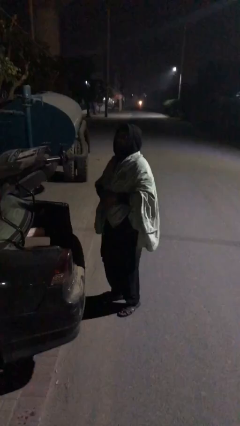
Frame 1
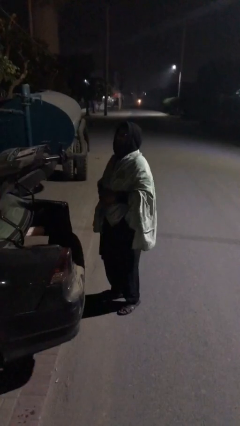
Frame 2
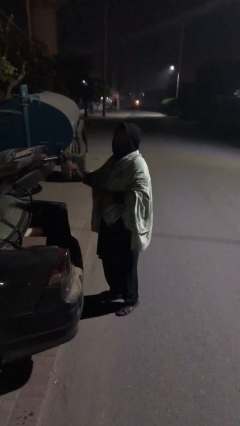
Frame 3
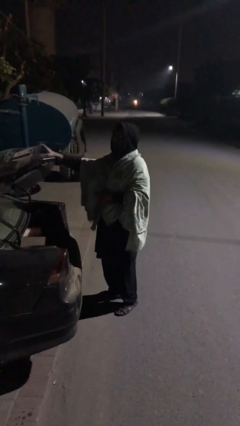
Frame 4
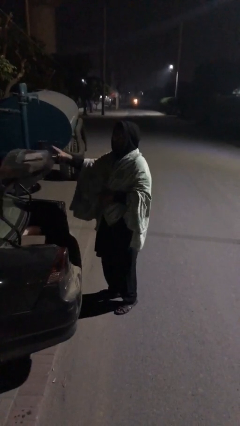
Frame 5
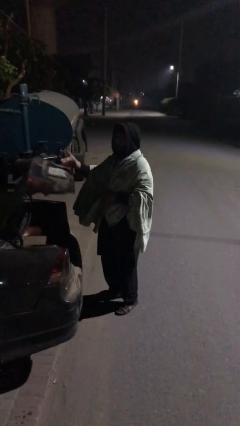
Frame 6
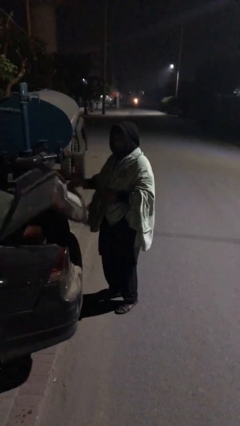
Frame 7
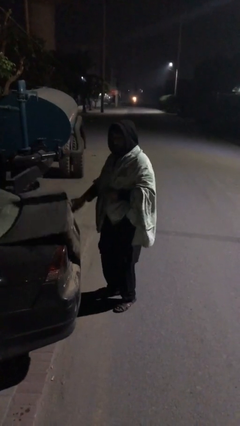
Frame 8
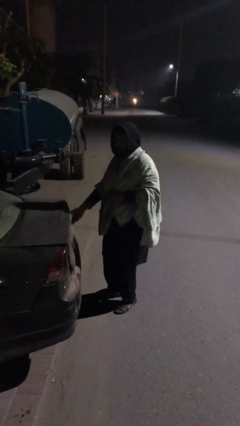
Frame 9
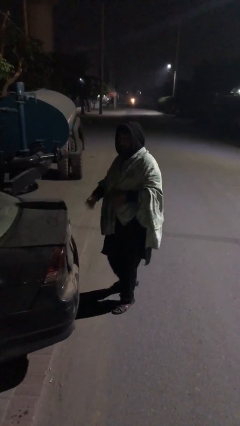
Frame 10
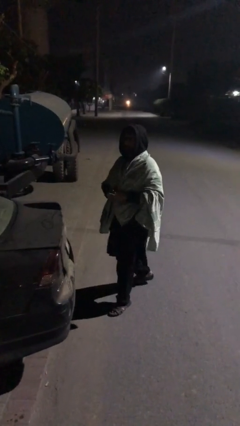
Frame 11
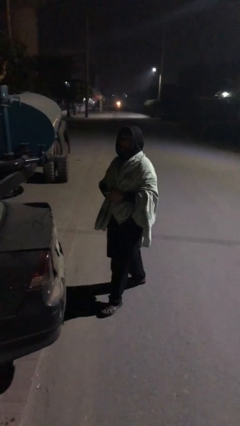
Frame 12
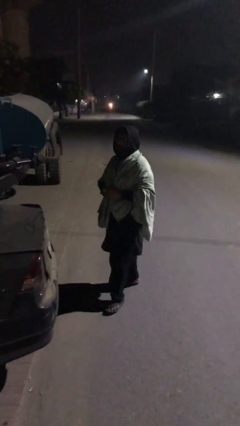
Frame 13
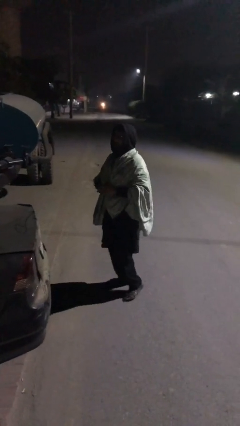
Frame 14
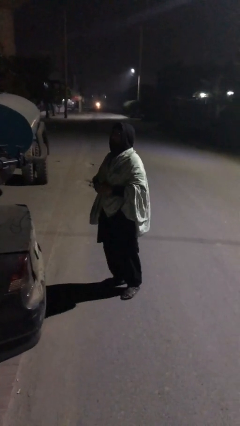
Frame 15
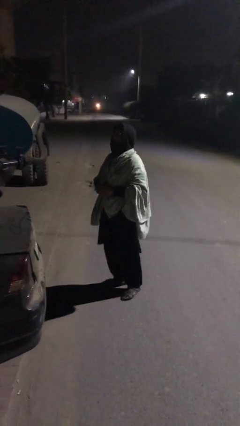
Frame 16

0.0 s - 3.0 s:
person closes car trunk

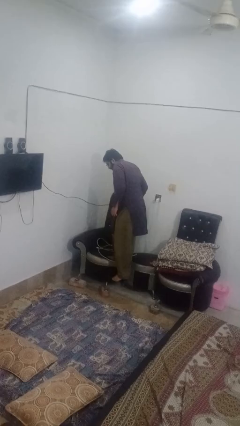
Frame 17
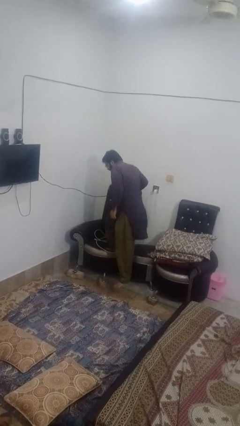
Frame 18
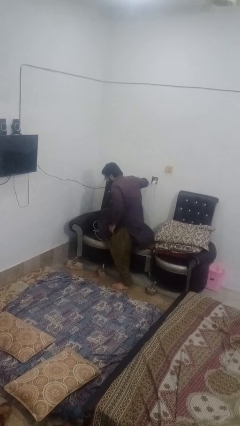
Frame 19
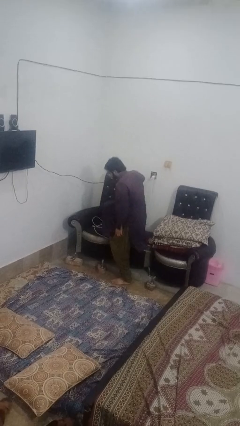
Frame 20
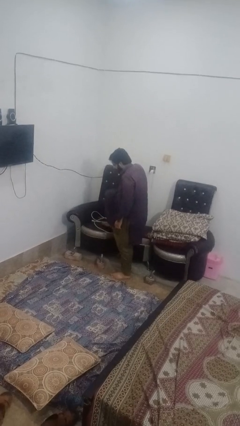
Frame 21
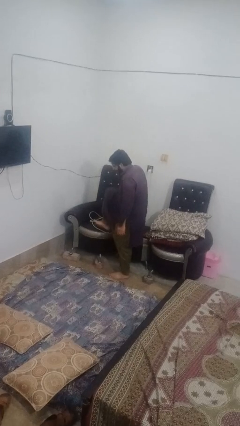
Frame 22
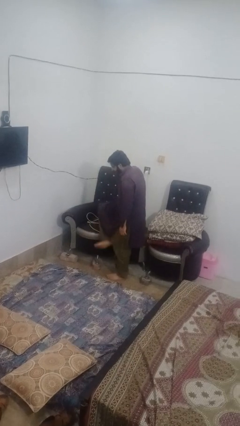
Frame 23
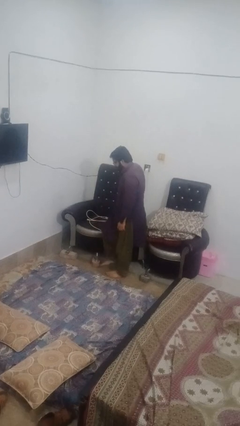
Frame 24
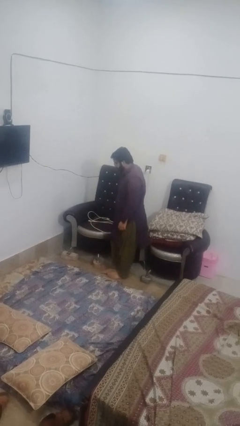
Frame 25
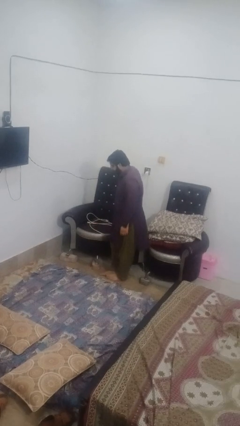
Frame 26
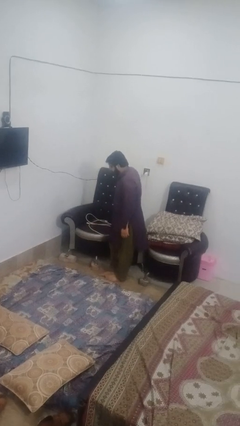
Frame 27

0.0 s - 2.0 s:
person climbs off couch

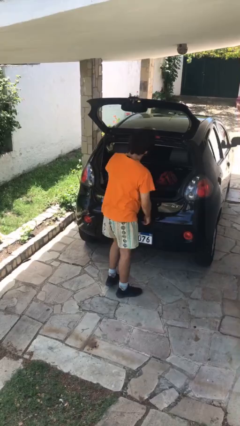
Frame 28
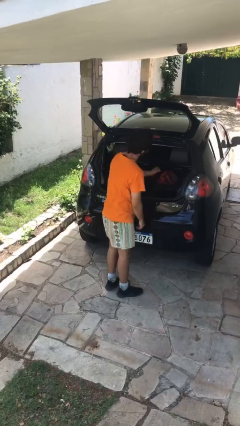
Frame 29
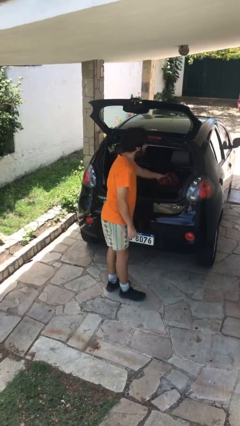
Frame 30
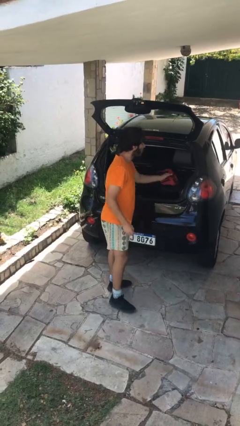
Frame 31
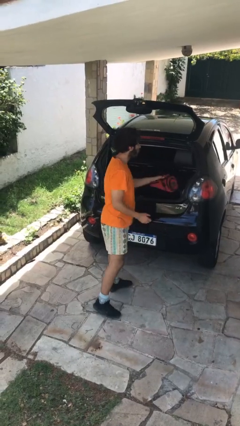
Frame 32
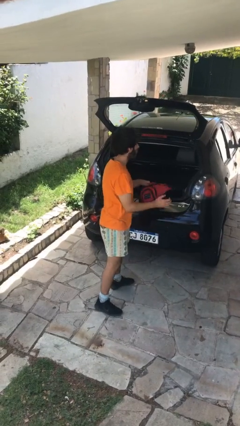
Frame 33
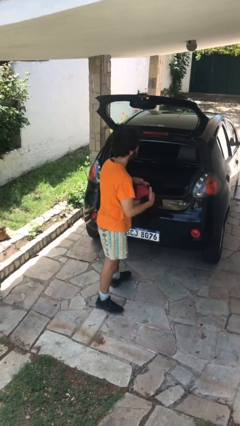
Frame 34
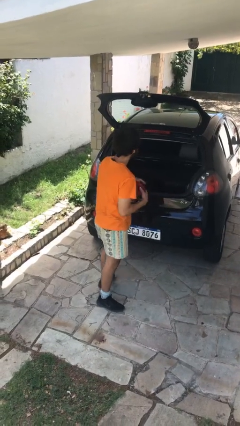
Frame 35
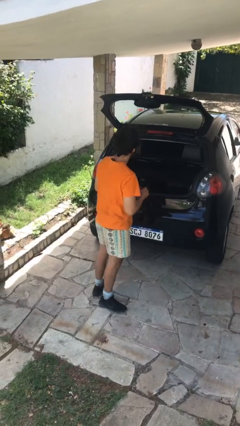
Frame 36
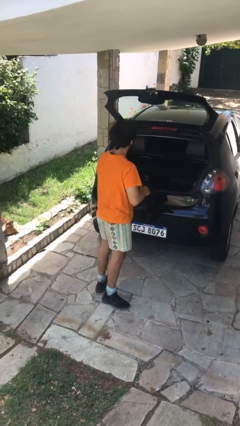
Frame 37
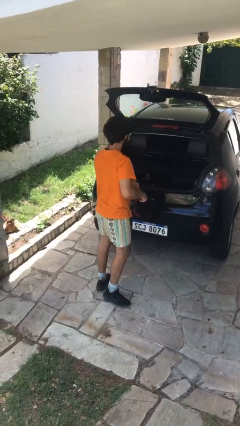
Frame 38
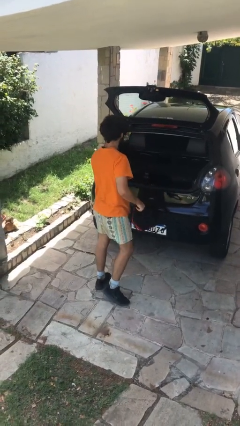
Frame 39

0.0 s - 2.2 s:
person unloads car

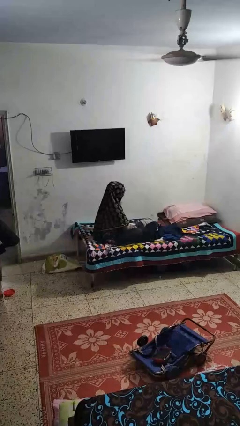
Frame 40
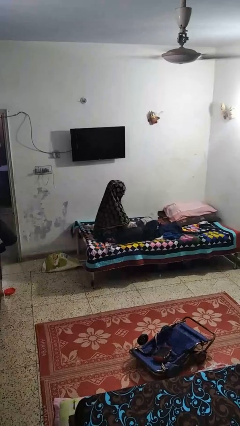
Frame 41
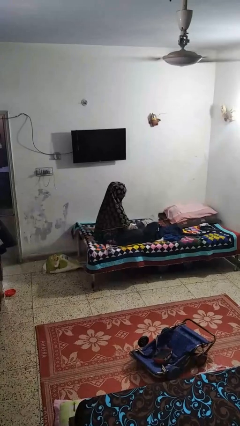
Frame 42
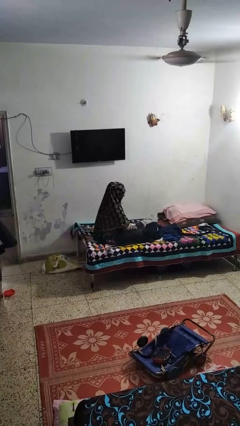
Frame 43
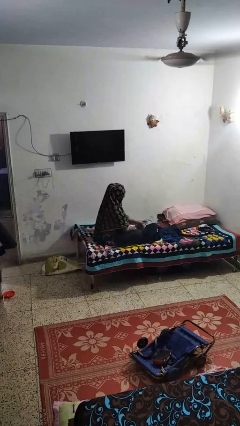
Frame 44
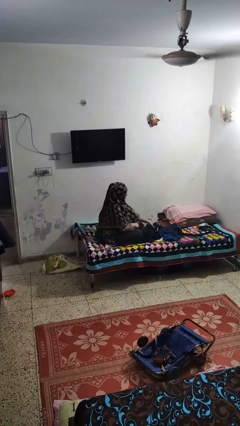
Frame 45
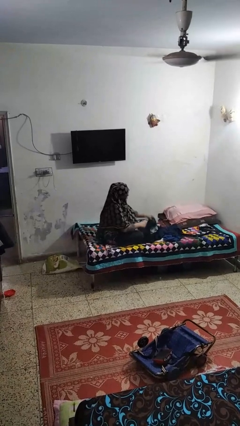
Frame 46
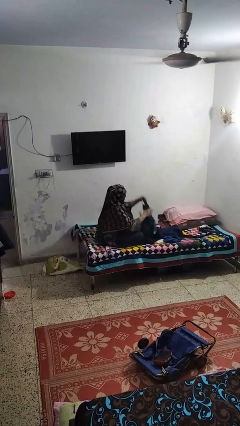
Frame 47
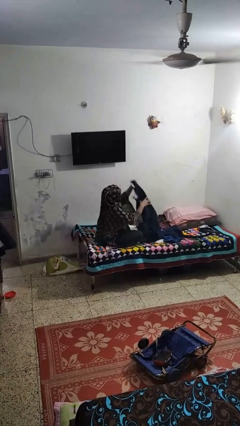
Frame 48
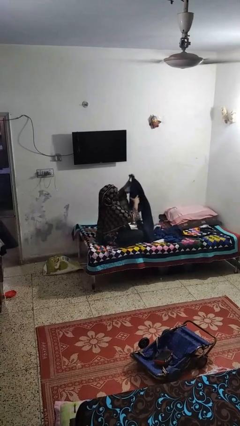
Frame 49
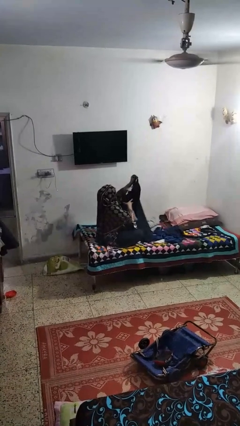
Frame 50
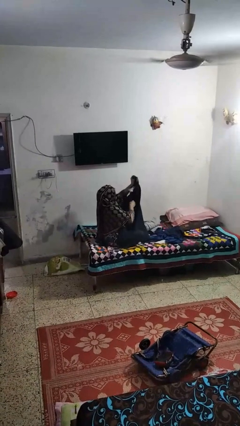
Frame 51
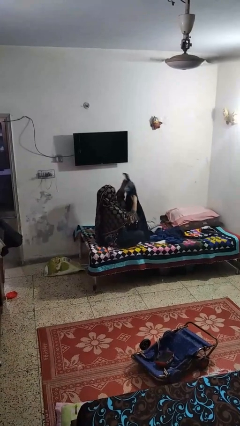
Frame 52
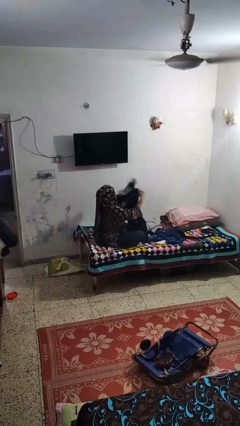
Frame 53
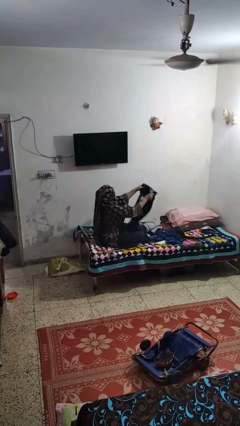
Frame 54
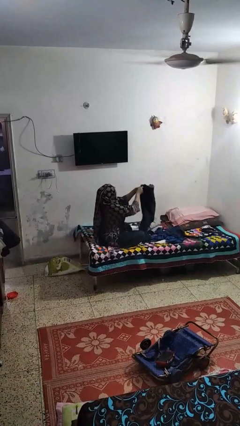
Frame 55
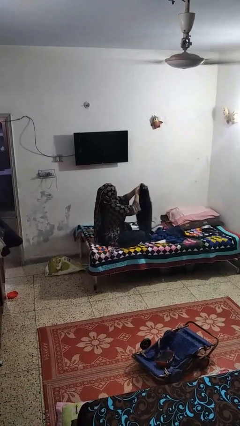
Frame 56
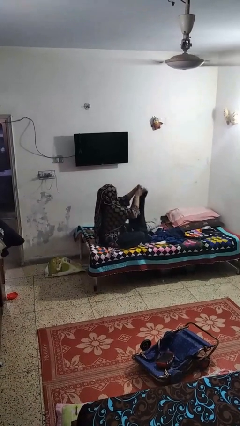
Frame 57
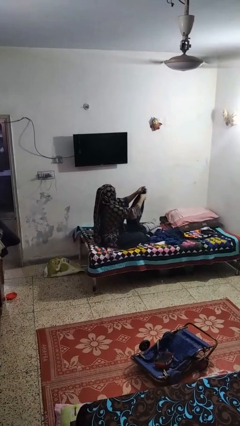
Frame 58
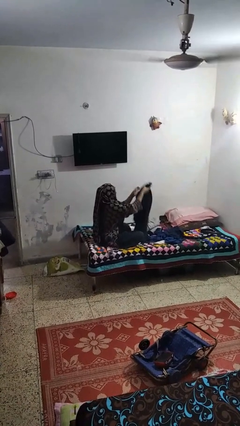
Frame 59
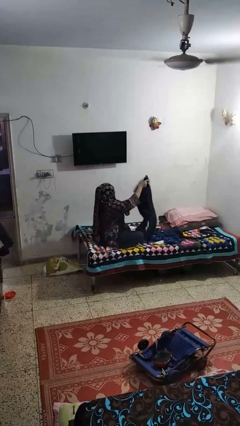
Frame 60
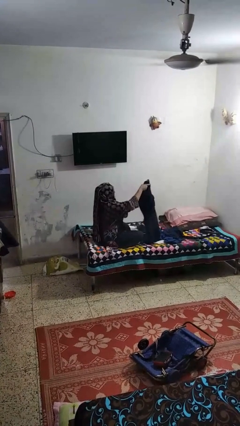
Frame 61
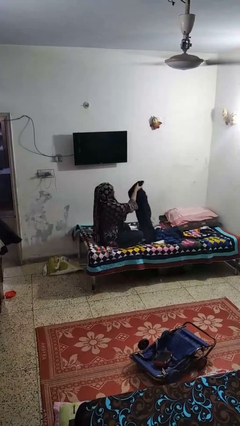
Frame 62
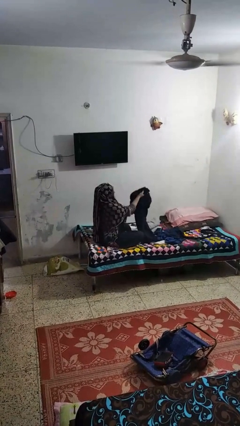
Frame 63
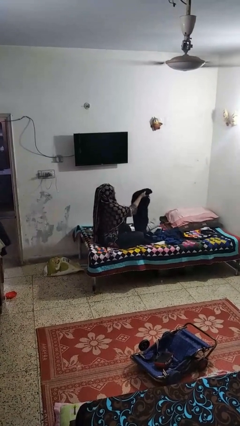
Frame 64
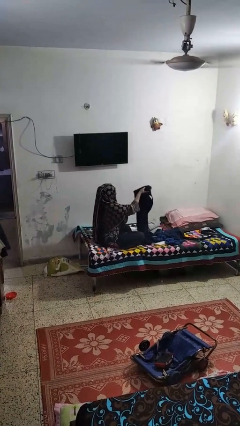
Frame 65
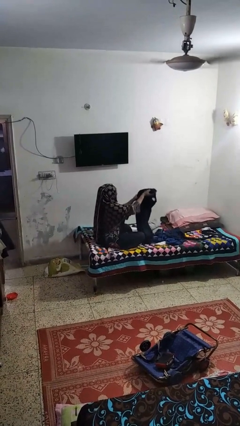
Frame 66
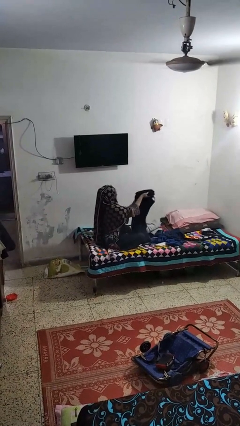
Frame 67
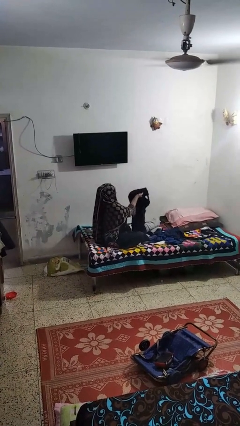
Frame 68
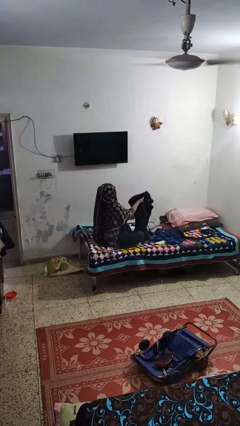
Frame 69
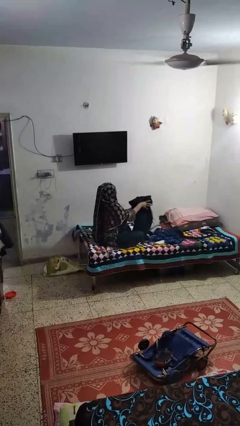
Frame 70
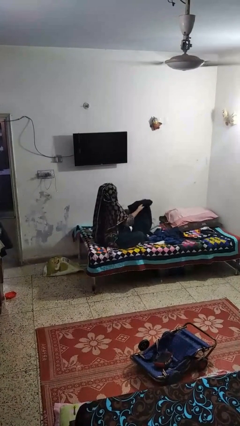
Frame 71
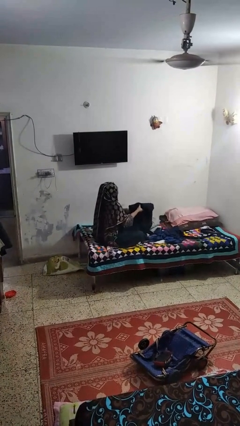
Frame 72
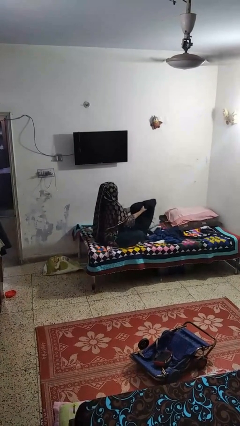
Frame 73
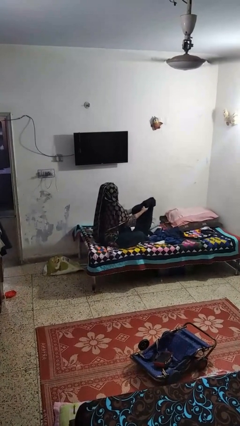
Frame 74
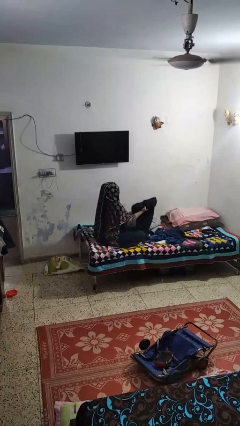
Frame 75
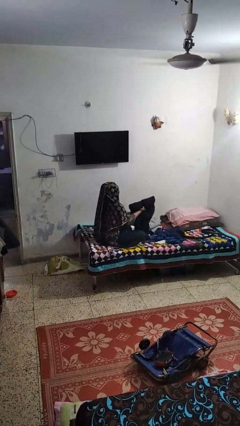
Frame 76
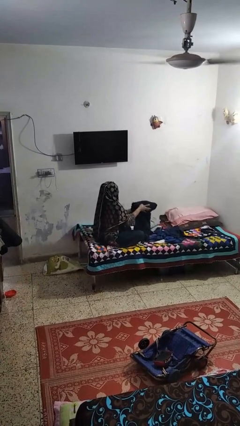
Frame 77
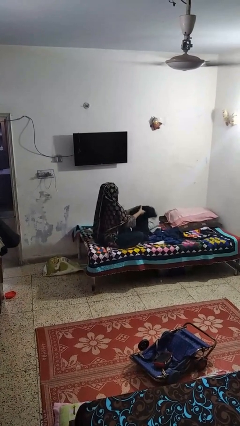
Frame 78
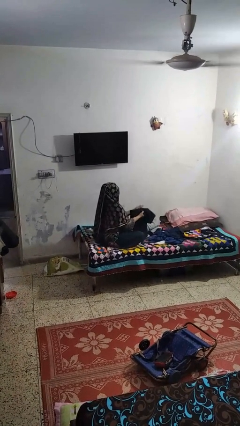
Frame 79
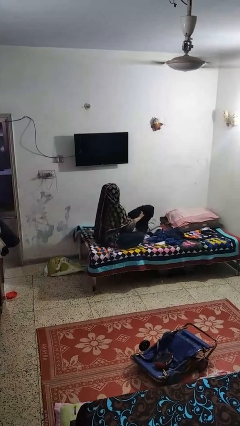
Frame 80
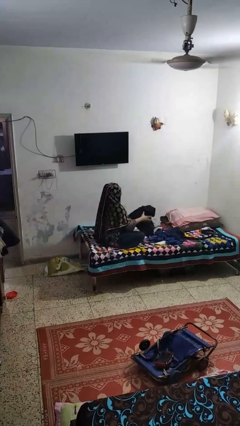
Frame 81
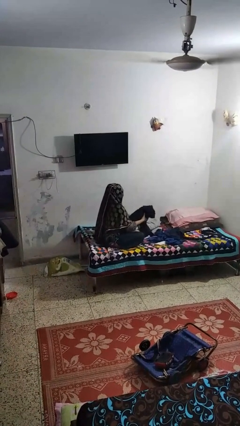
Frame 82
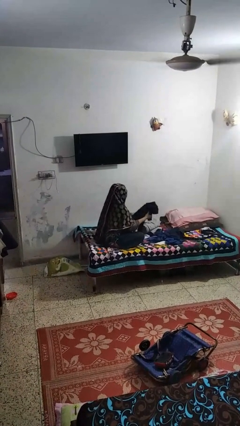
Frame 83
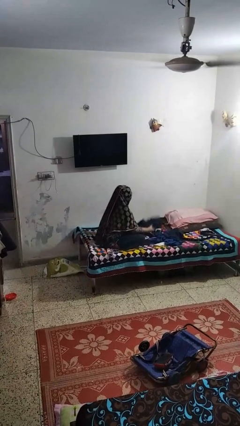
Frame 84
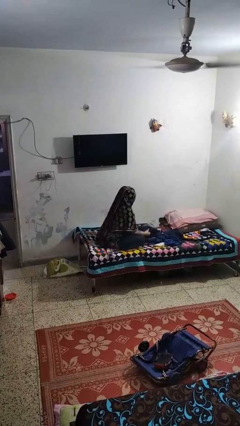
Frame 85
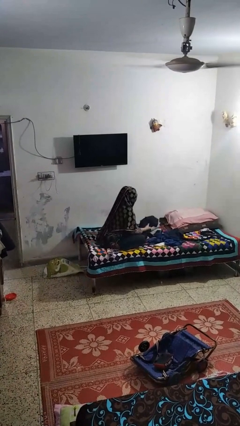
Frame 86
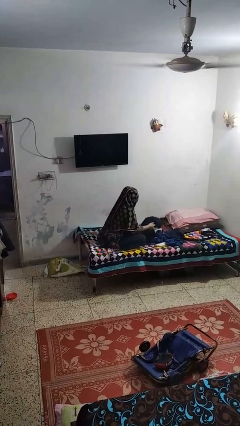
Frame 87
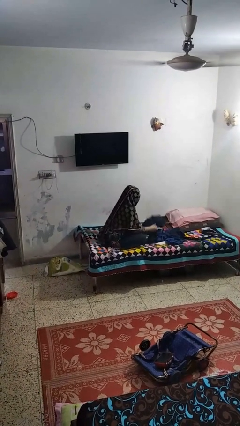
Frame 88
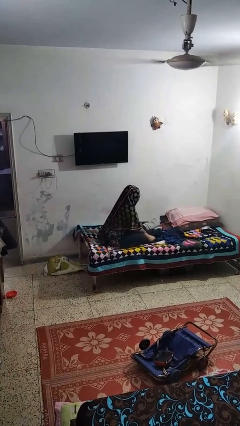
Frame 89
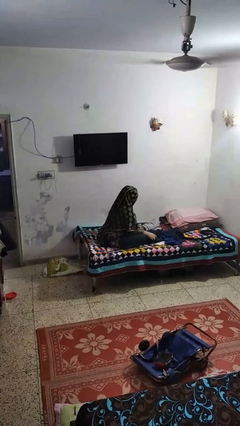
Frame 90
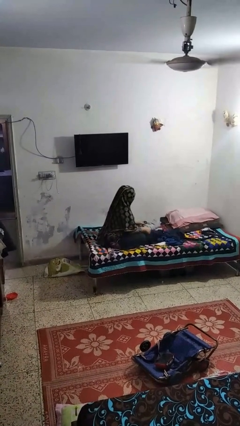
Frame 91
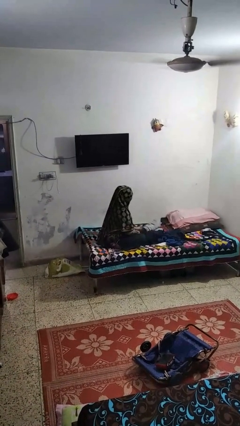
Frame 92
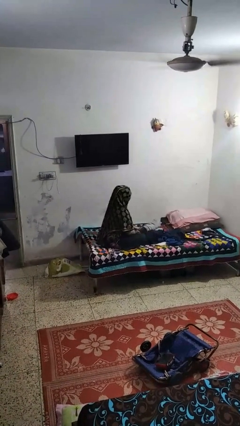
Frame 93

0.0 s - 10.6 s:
person folds pants
